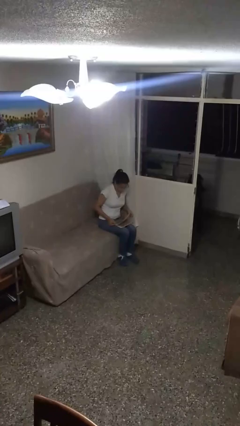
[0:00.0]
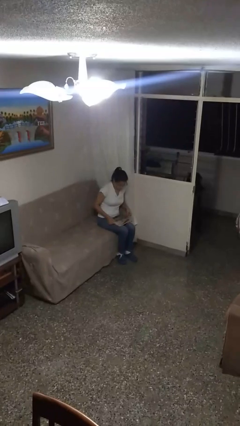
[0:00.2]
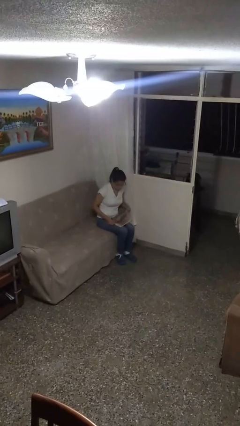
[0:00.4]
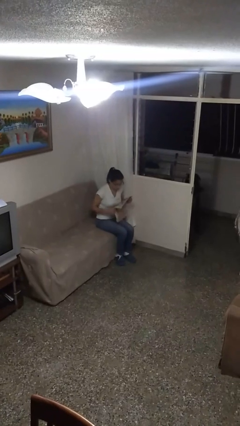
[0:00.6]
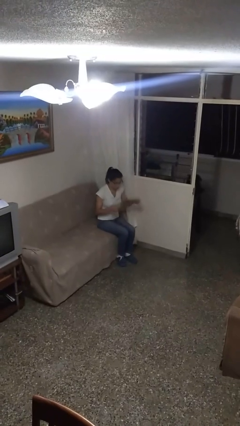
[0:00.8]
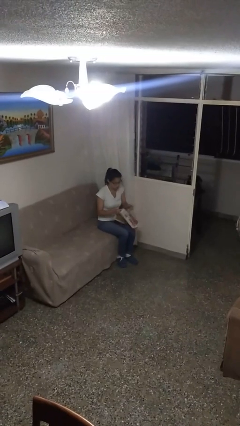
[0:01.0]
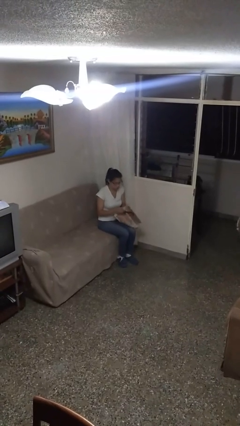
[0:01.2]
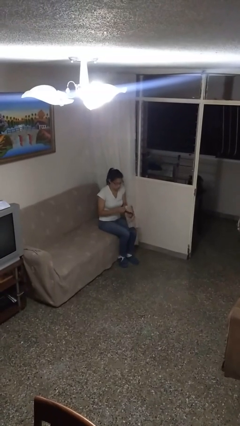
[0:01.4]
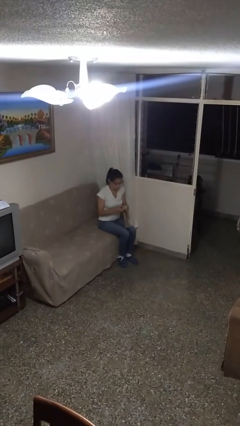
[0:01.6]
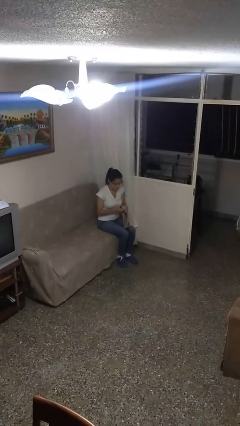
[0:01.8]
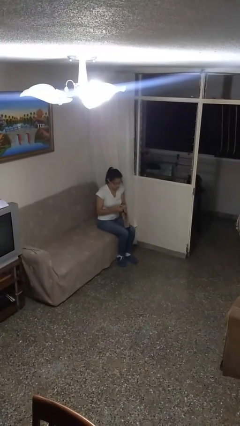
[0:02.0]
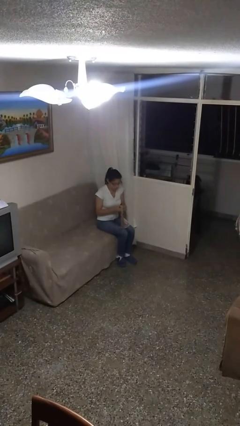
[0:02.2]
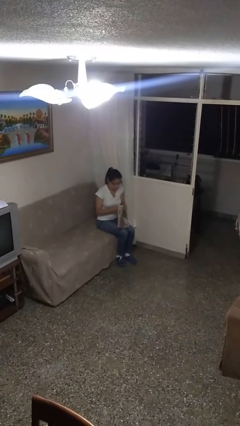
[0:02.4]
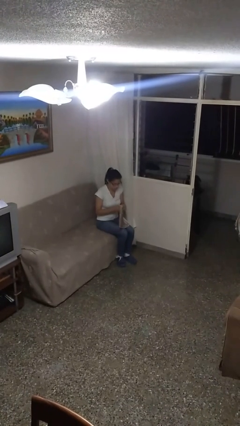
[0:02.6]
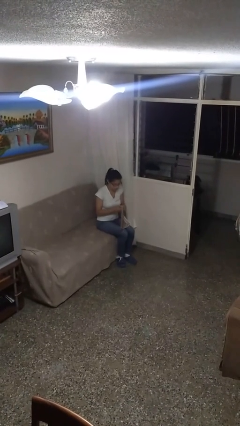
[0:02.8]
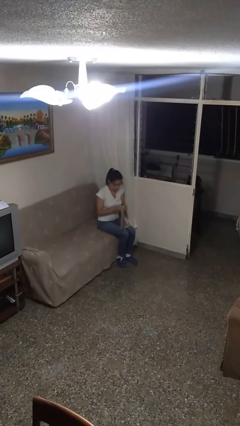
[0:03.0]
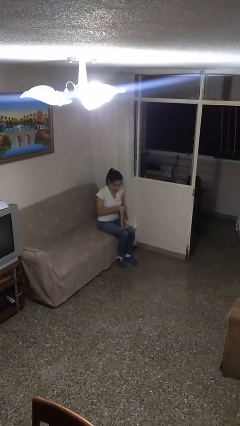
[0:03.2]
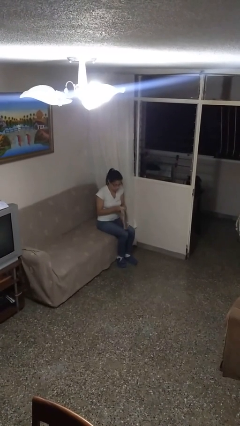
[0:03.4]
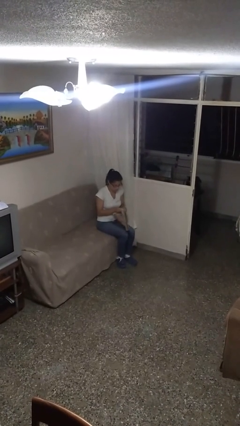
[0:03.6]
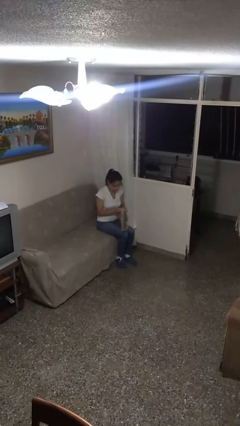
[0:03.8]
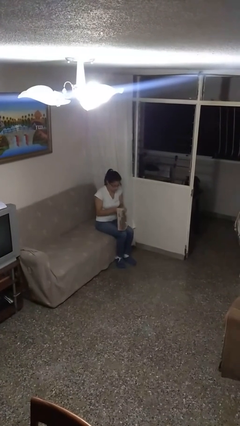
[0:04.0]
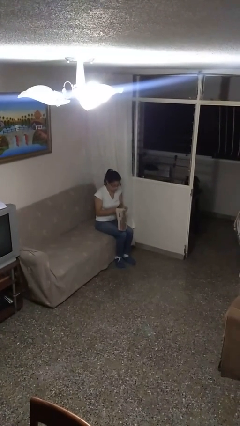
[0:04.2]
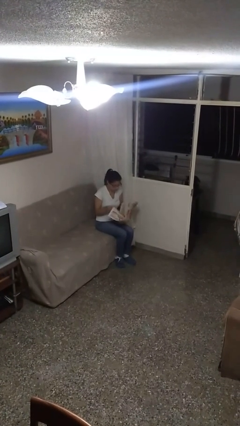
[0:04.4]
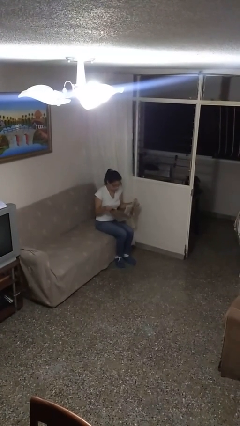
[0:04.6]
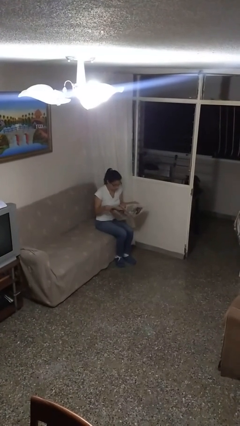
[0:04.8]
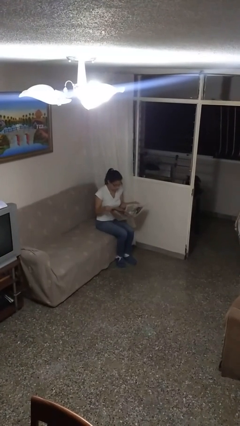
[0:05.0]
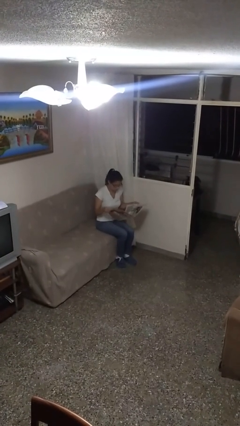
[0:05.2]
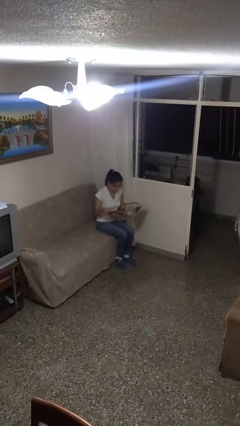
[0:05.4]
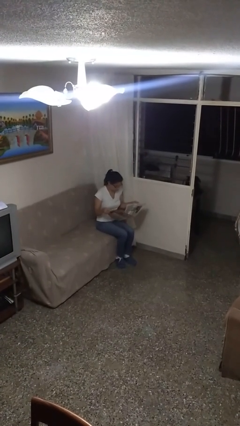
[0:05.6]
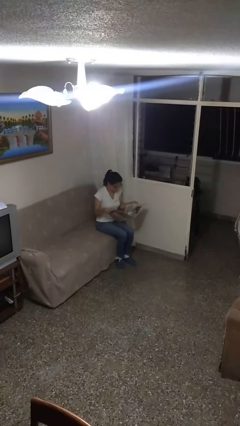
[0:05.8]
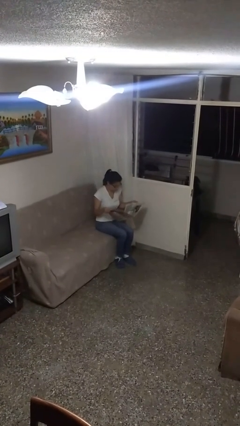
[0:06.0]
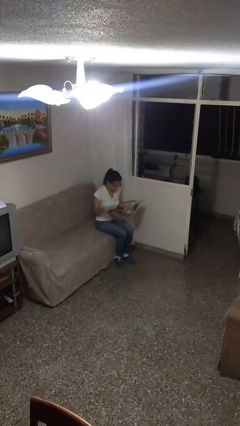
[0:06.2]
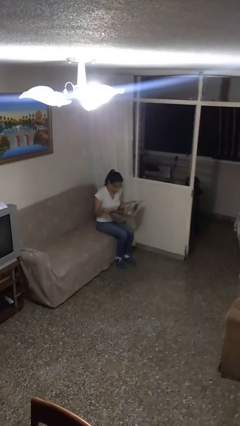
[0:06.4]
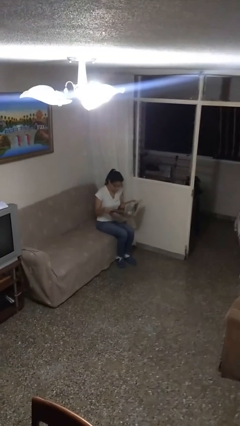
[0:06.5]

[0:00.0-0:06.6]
person reads newspaper

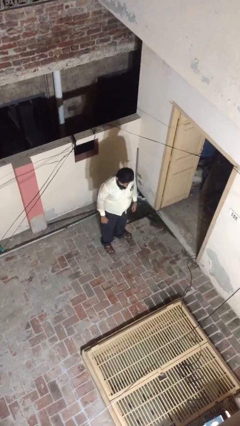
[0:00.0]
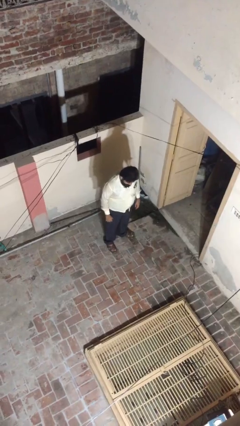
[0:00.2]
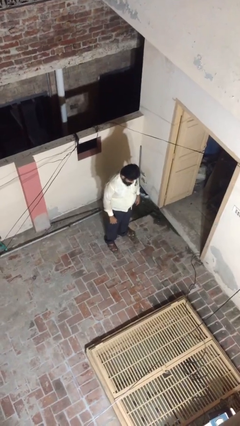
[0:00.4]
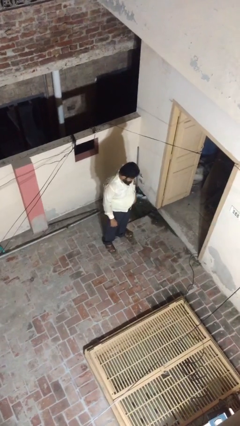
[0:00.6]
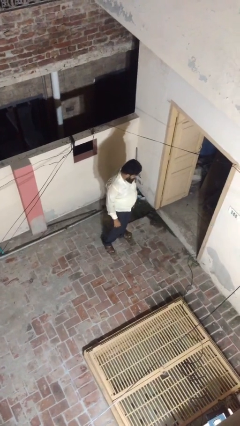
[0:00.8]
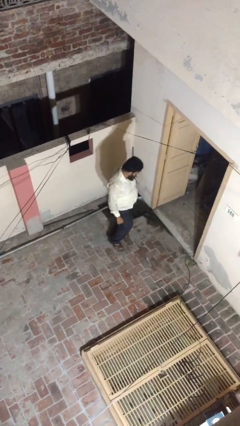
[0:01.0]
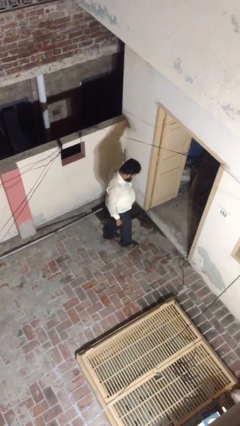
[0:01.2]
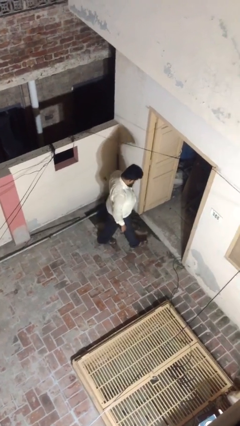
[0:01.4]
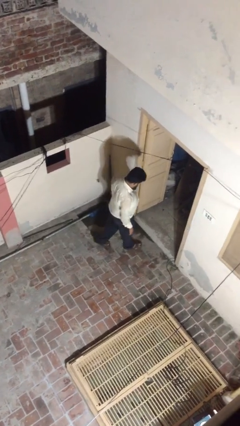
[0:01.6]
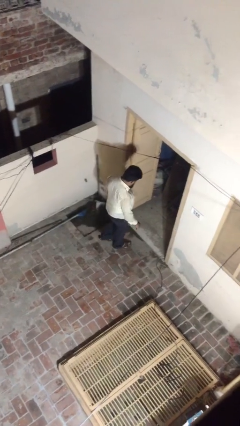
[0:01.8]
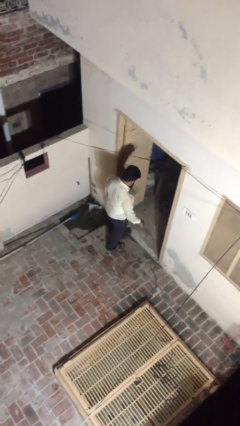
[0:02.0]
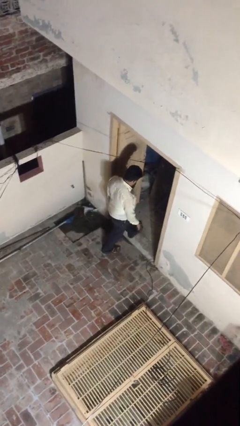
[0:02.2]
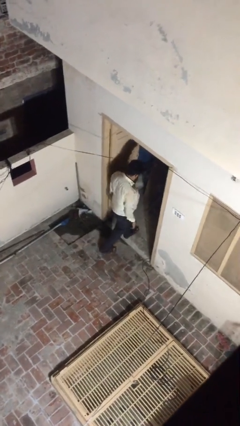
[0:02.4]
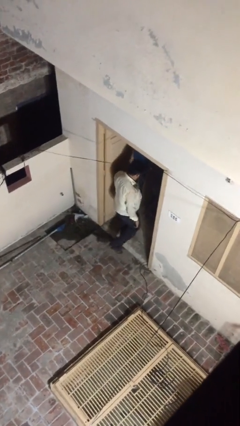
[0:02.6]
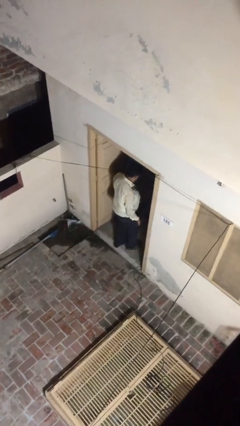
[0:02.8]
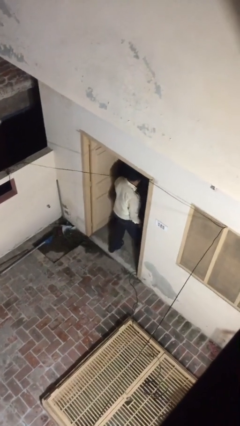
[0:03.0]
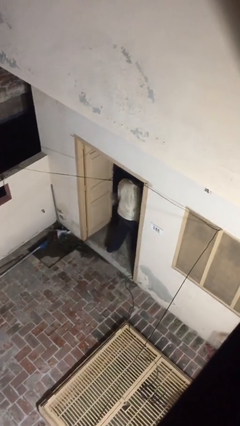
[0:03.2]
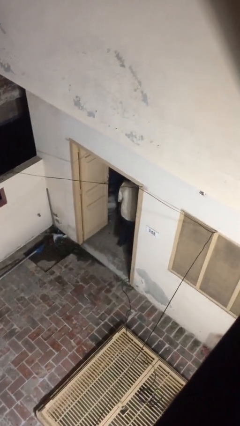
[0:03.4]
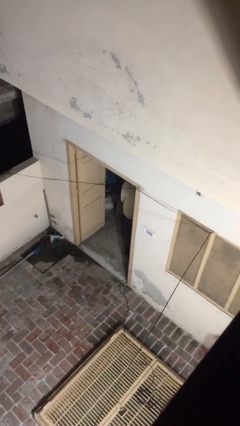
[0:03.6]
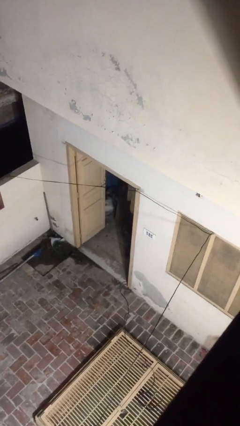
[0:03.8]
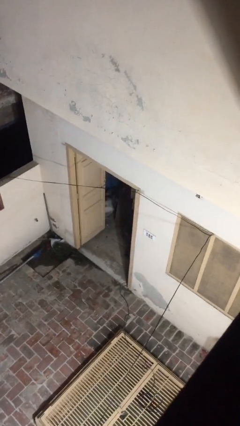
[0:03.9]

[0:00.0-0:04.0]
person exits scene through structure

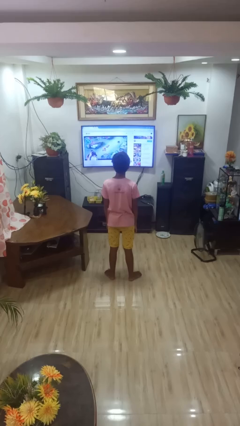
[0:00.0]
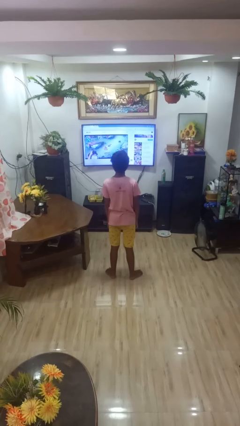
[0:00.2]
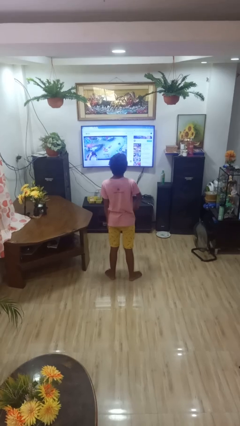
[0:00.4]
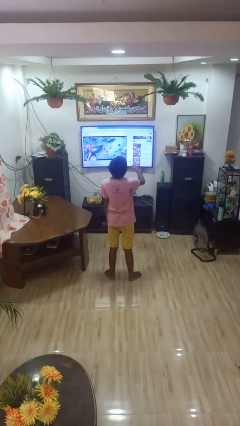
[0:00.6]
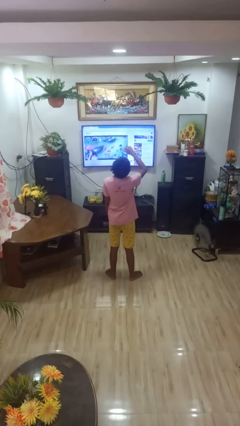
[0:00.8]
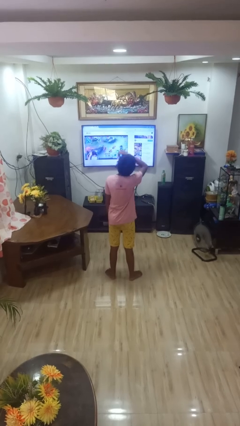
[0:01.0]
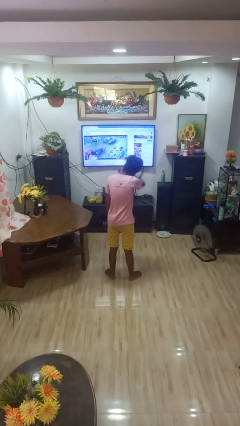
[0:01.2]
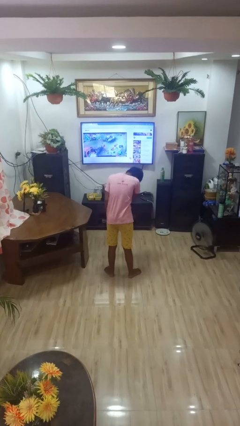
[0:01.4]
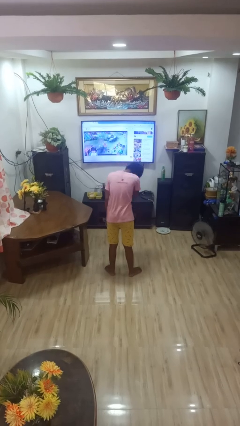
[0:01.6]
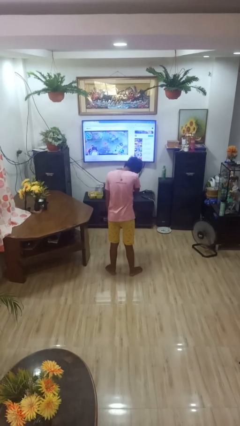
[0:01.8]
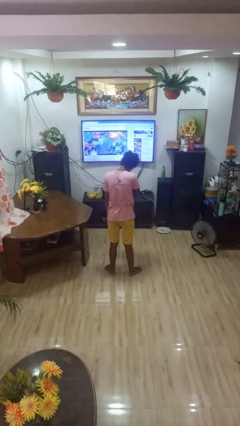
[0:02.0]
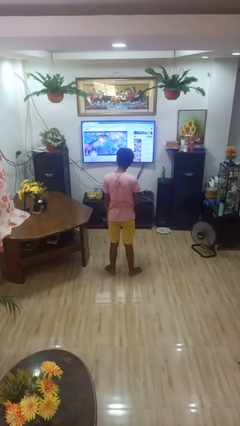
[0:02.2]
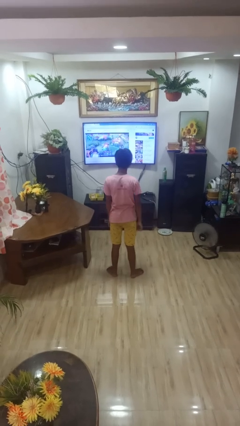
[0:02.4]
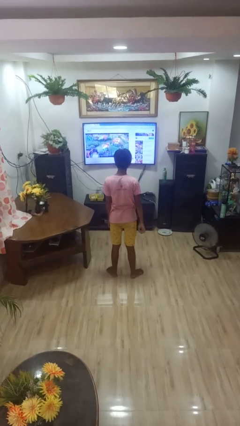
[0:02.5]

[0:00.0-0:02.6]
person sneezes into arm

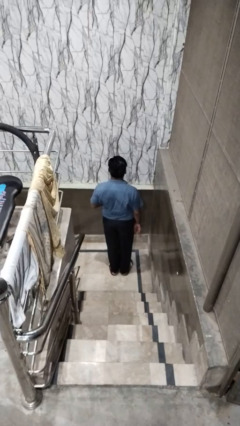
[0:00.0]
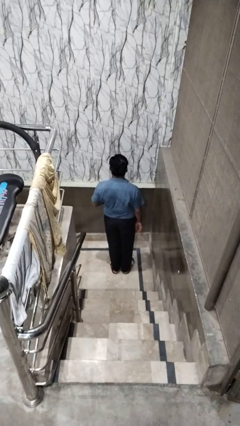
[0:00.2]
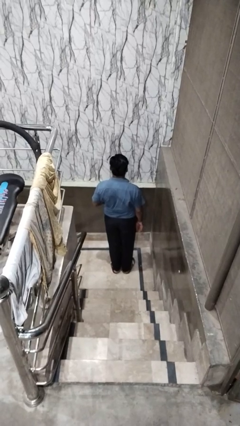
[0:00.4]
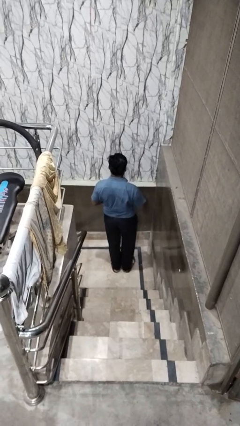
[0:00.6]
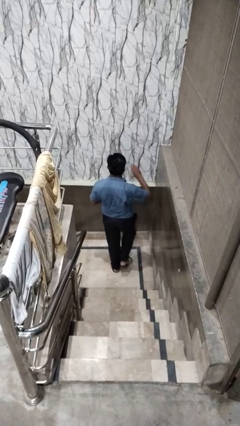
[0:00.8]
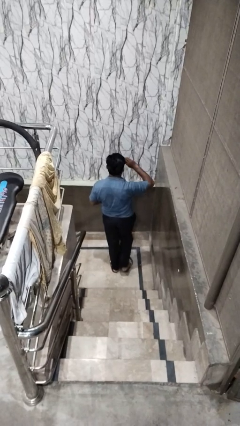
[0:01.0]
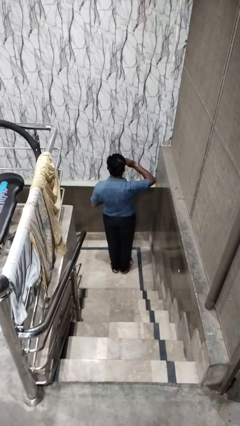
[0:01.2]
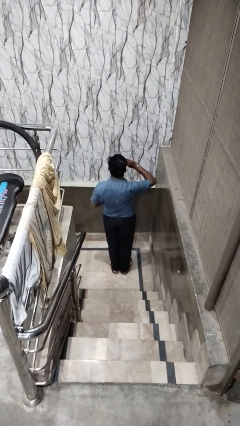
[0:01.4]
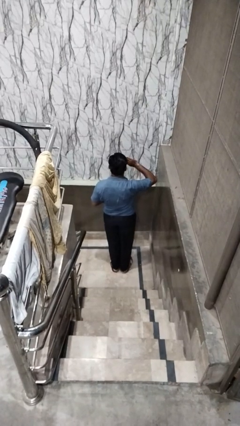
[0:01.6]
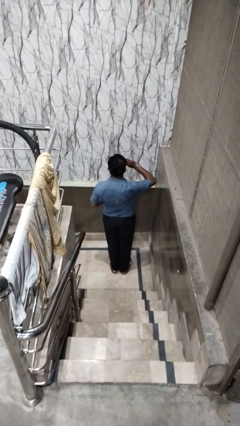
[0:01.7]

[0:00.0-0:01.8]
person salutes

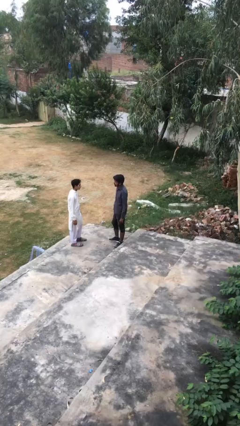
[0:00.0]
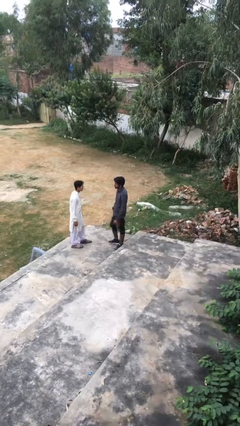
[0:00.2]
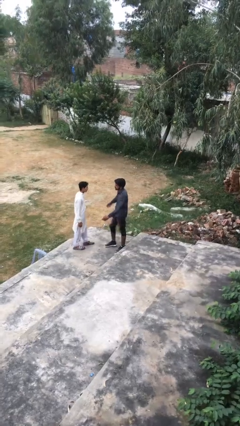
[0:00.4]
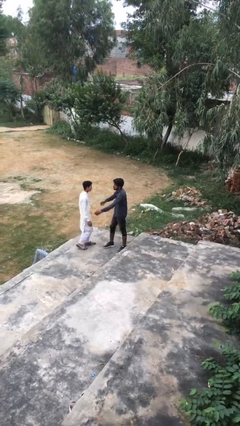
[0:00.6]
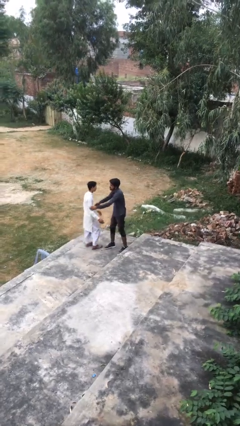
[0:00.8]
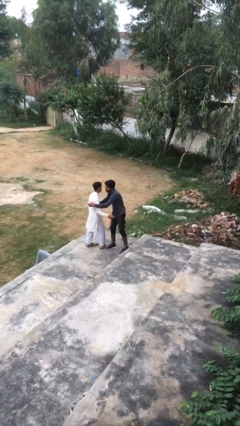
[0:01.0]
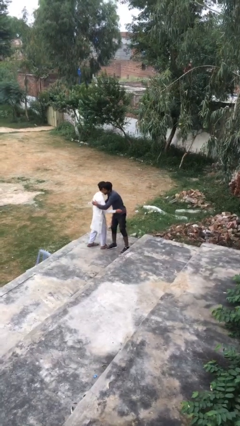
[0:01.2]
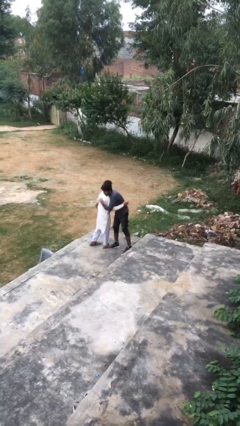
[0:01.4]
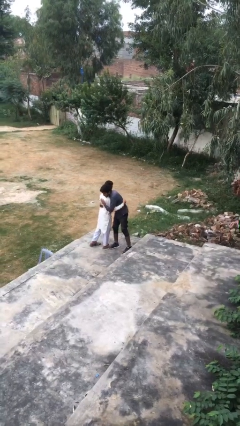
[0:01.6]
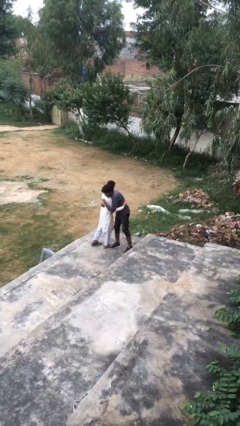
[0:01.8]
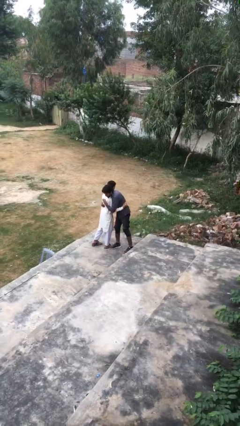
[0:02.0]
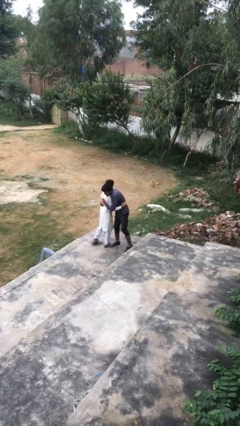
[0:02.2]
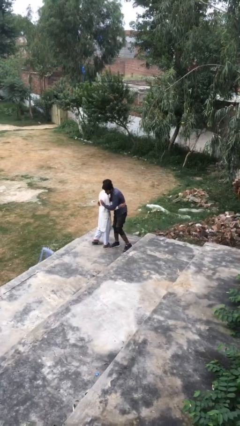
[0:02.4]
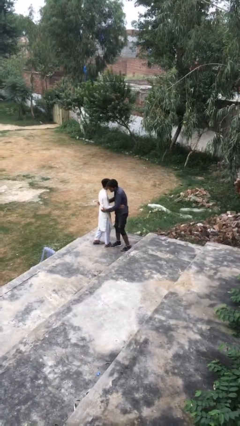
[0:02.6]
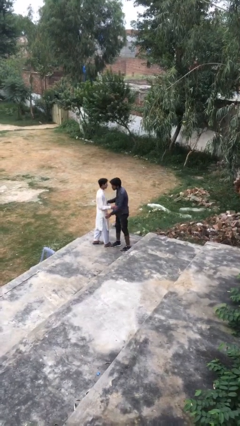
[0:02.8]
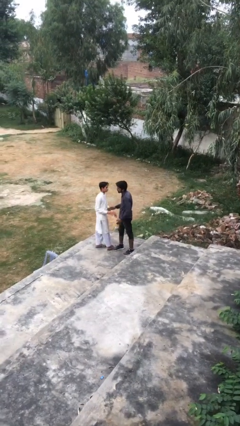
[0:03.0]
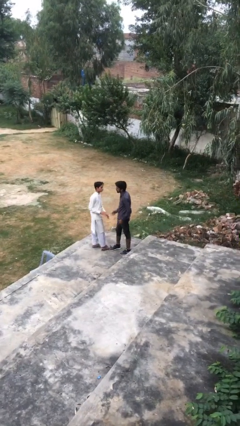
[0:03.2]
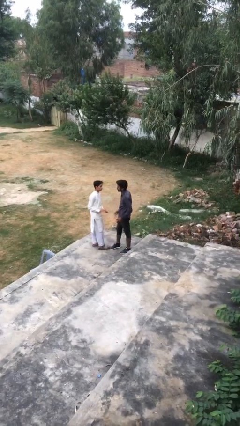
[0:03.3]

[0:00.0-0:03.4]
person embraces person
